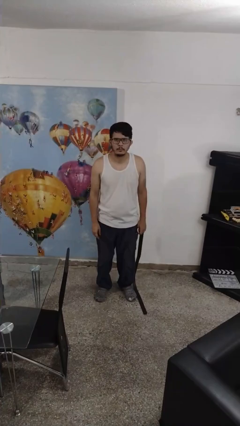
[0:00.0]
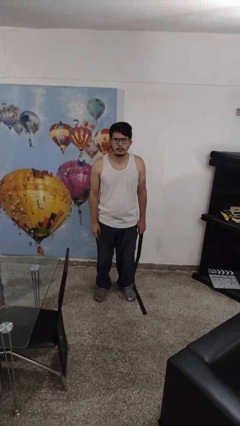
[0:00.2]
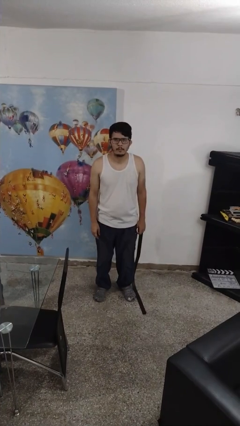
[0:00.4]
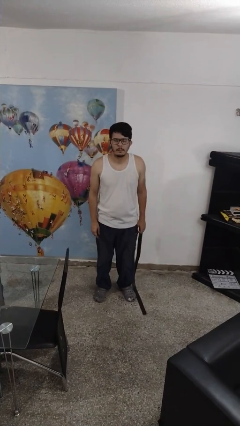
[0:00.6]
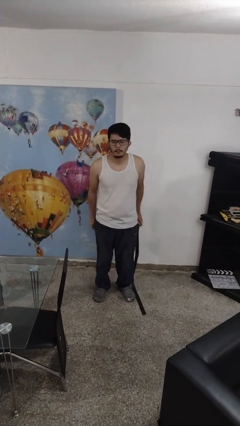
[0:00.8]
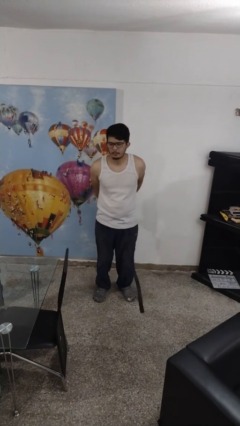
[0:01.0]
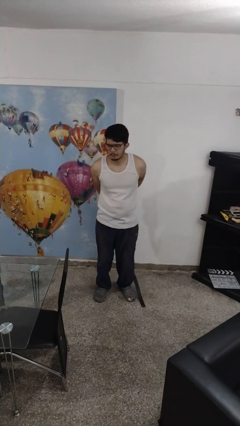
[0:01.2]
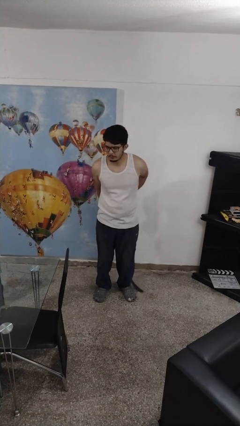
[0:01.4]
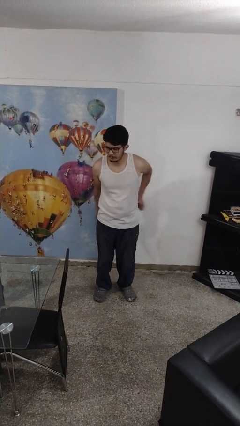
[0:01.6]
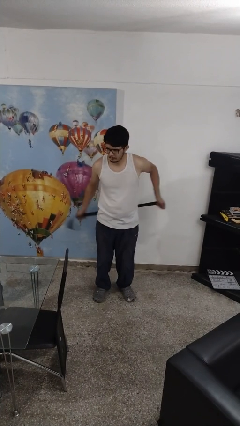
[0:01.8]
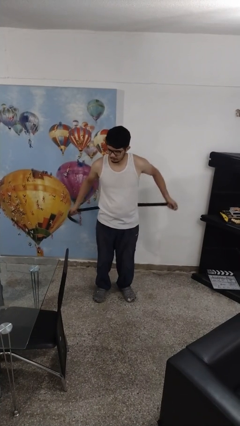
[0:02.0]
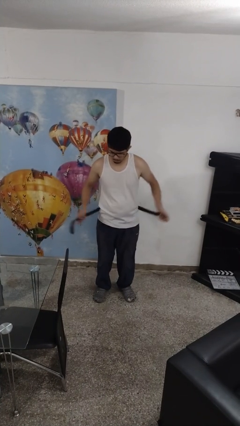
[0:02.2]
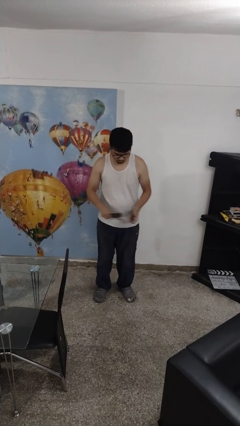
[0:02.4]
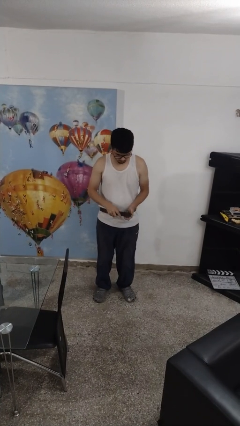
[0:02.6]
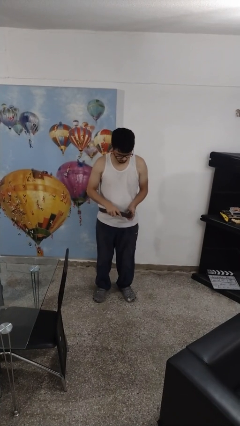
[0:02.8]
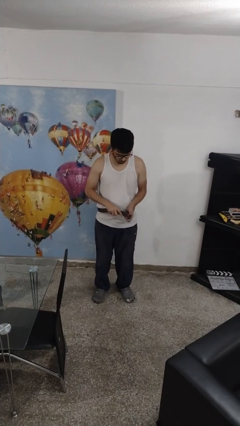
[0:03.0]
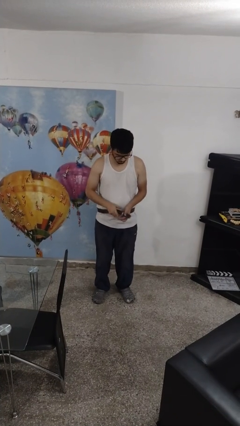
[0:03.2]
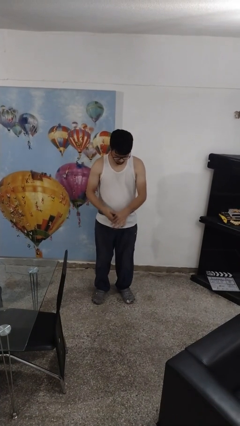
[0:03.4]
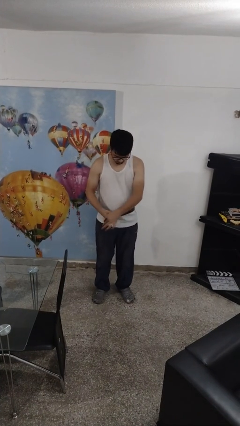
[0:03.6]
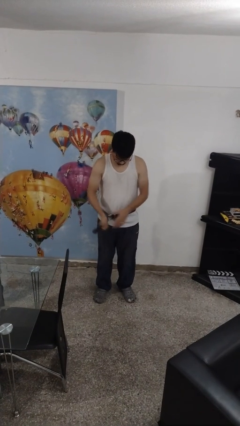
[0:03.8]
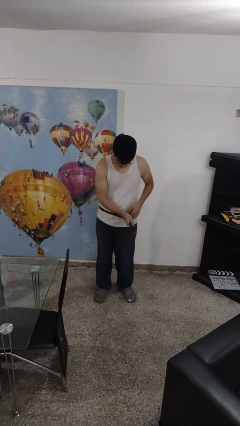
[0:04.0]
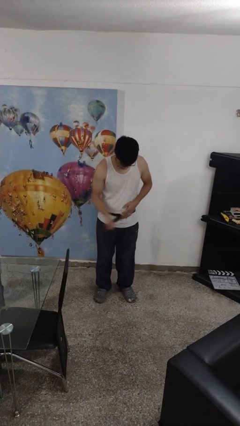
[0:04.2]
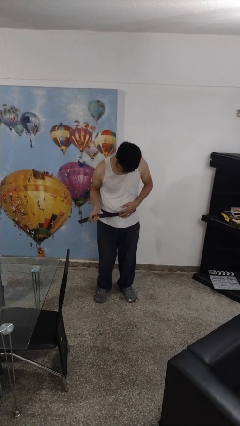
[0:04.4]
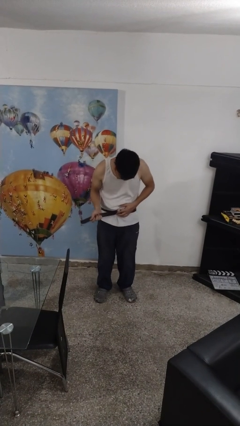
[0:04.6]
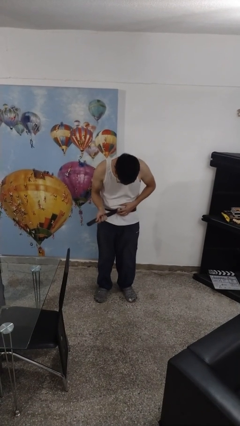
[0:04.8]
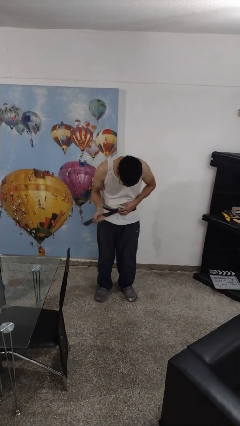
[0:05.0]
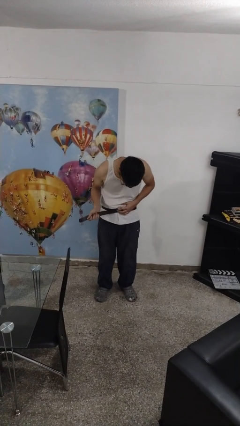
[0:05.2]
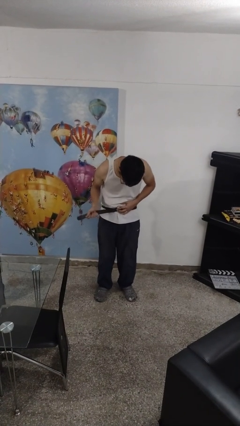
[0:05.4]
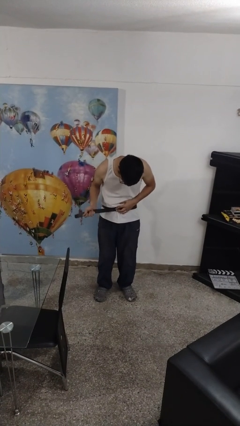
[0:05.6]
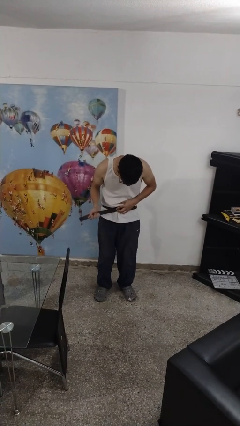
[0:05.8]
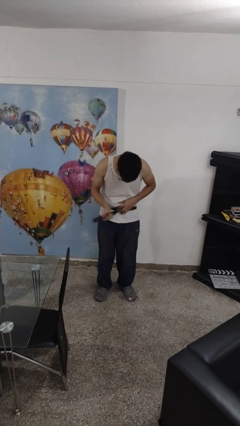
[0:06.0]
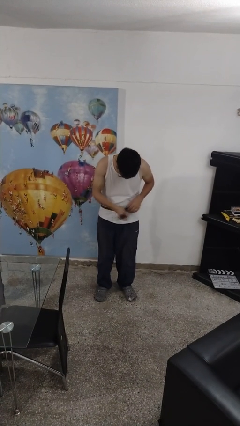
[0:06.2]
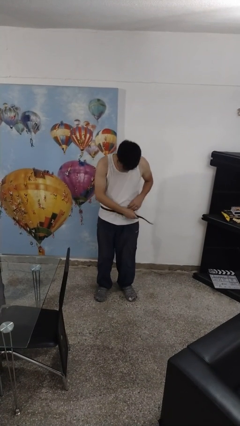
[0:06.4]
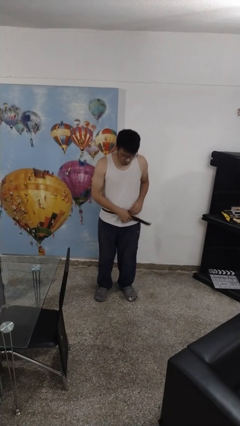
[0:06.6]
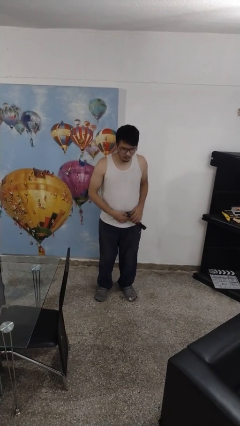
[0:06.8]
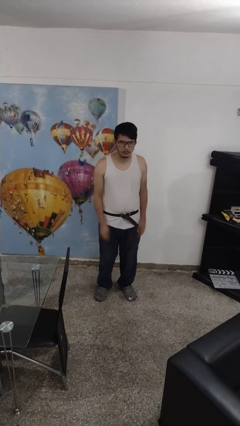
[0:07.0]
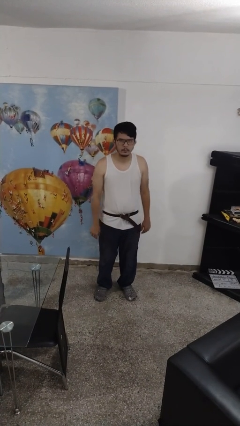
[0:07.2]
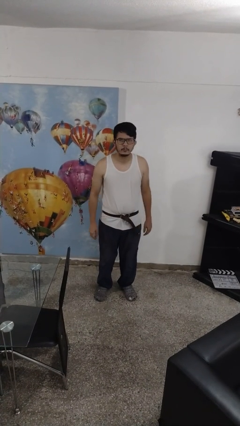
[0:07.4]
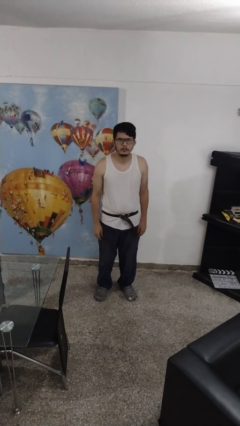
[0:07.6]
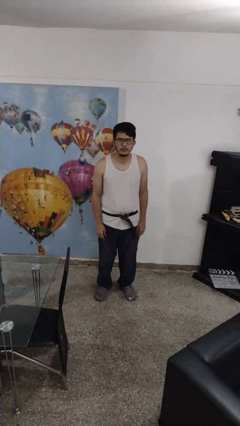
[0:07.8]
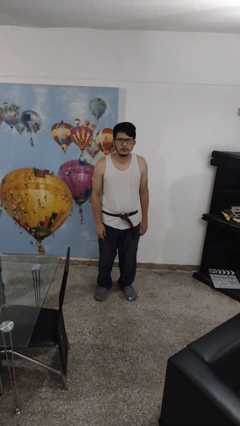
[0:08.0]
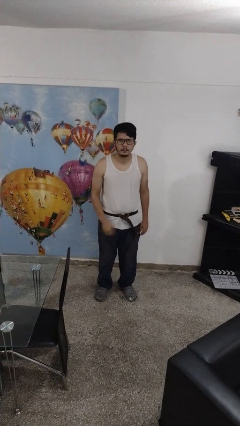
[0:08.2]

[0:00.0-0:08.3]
person puts on belt

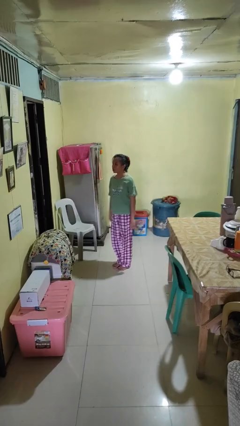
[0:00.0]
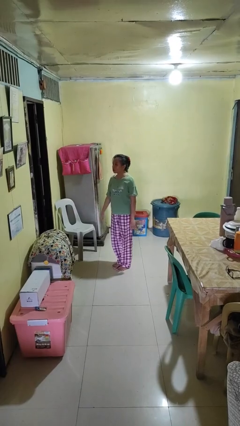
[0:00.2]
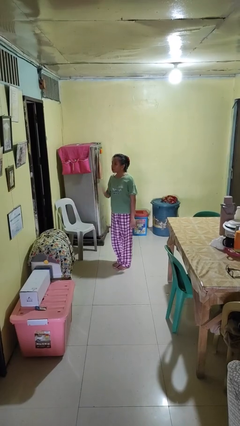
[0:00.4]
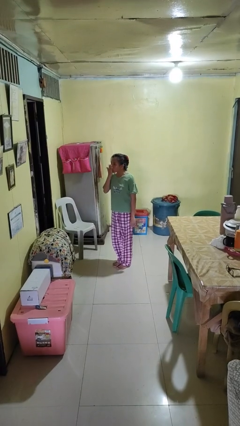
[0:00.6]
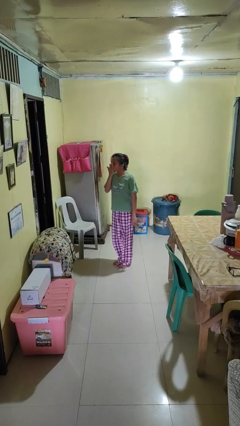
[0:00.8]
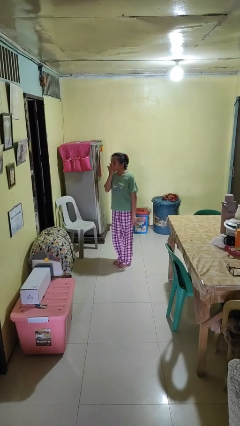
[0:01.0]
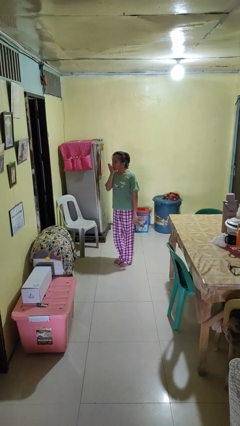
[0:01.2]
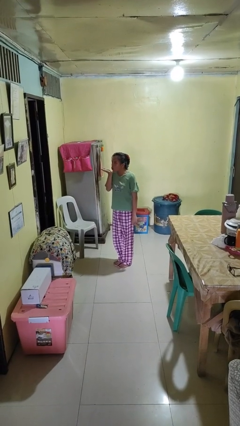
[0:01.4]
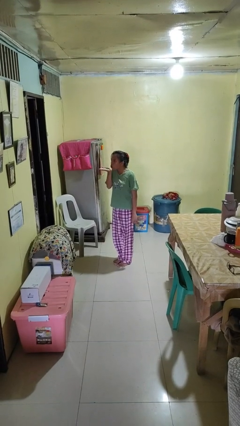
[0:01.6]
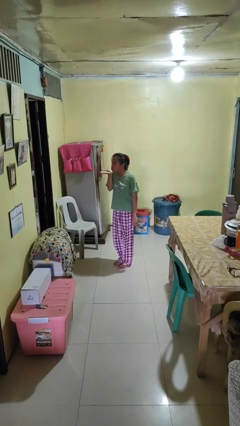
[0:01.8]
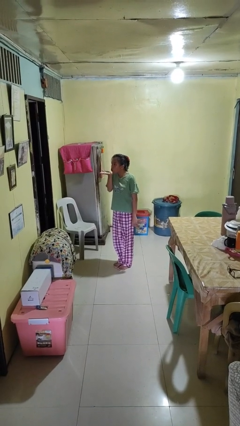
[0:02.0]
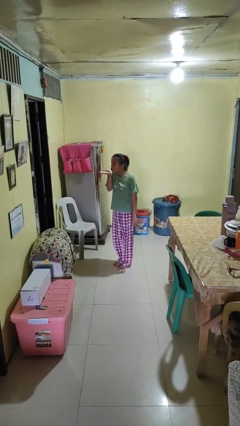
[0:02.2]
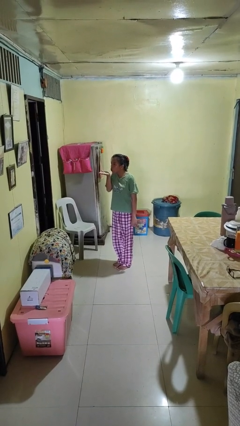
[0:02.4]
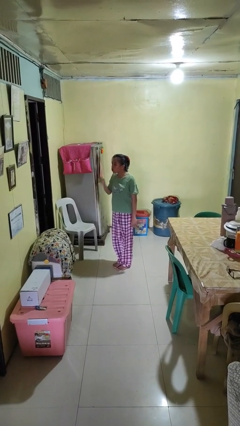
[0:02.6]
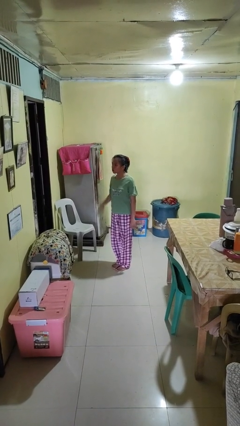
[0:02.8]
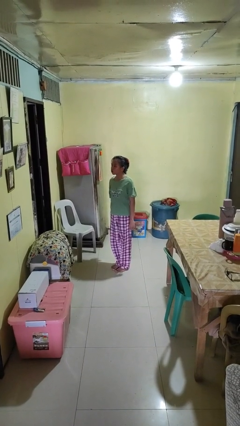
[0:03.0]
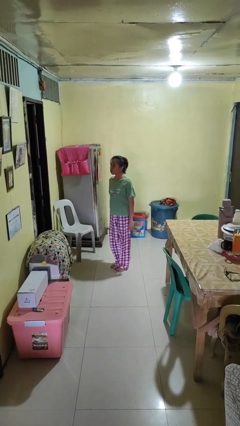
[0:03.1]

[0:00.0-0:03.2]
person gestures blow kiss

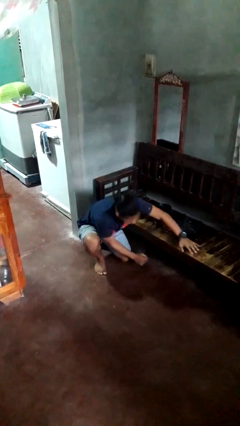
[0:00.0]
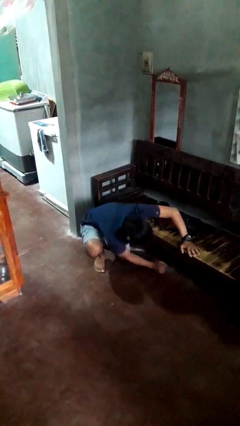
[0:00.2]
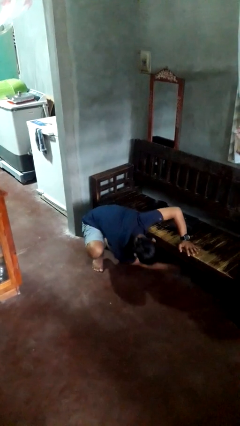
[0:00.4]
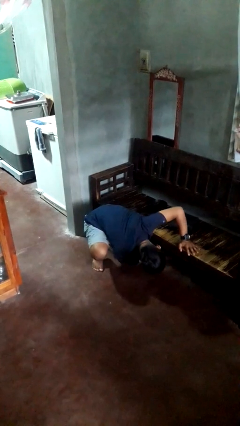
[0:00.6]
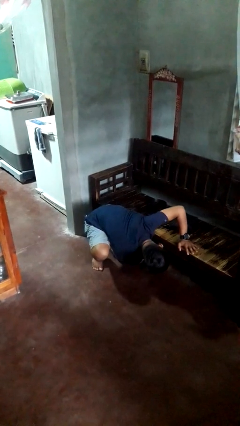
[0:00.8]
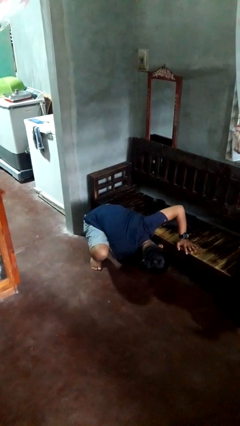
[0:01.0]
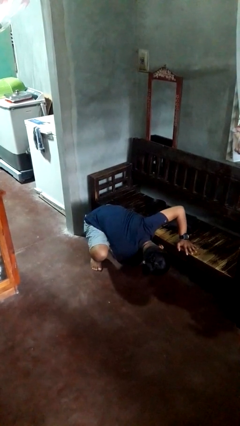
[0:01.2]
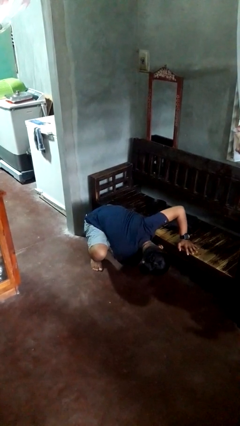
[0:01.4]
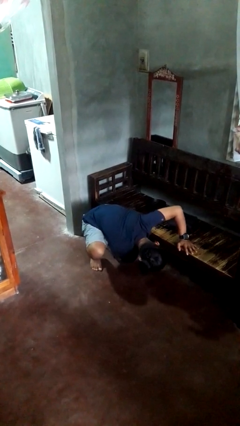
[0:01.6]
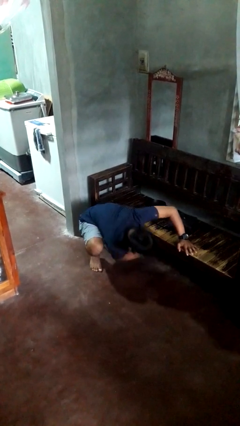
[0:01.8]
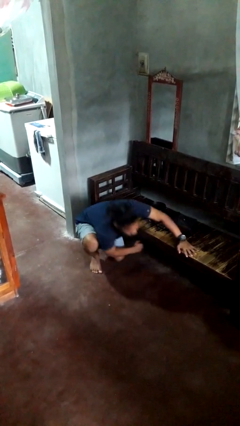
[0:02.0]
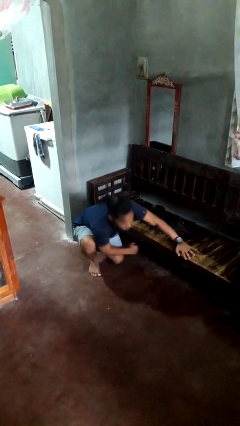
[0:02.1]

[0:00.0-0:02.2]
person searches under couch

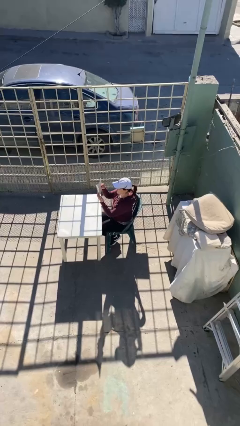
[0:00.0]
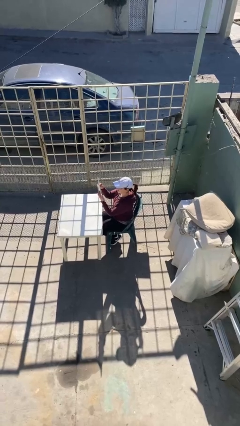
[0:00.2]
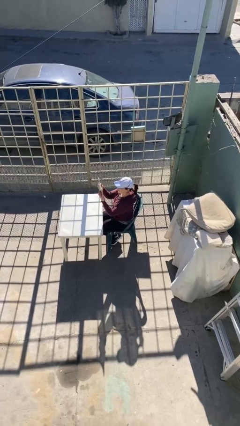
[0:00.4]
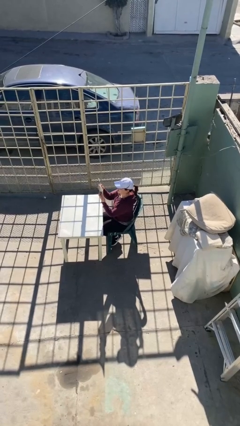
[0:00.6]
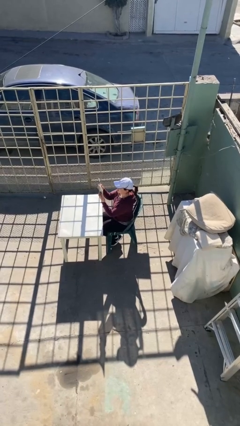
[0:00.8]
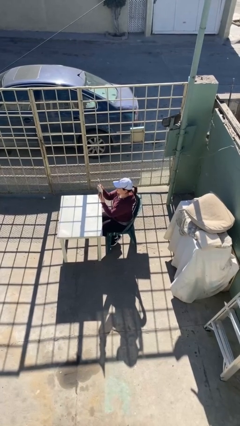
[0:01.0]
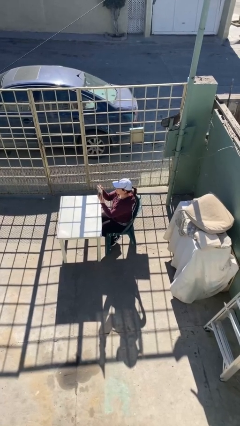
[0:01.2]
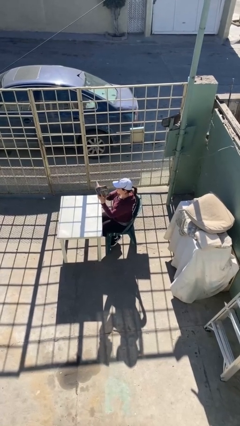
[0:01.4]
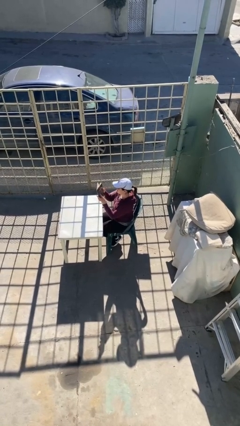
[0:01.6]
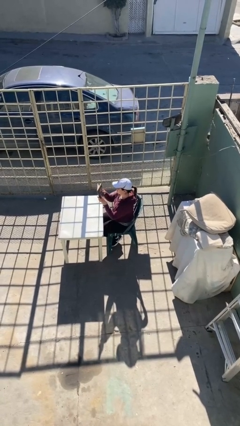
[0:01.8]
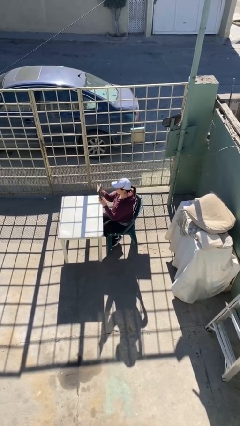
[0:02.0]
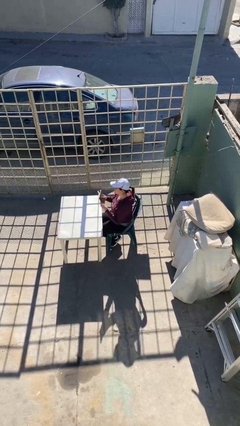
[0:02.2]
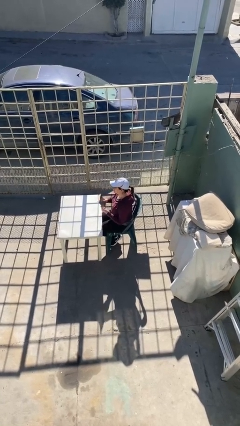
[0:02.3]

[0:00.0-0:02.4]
person reads document

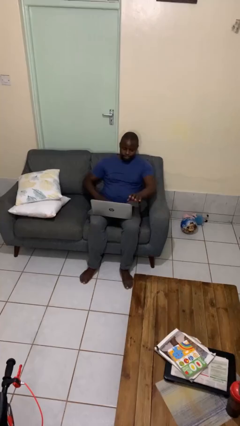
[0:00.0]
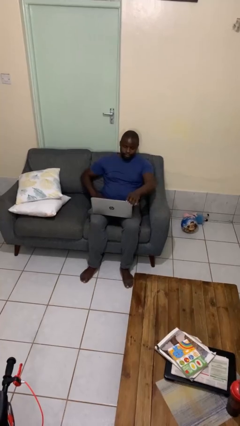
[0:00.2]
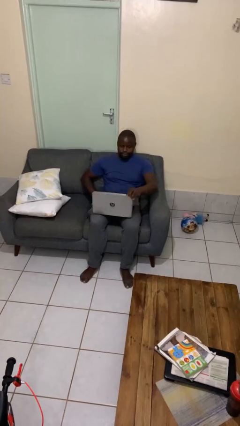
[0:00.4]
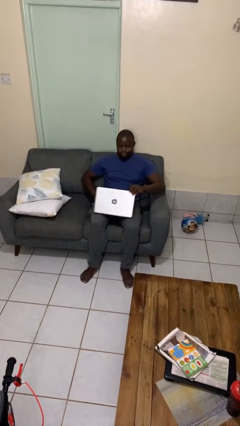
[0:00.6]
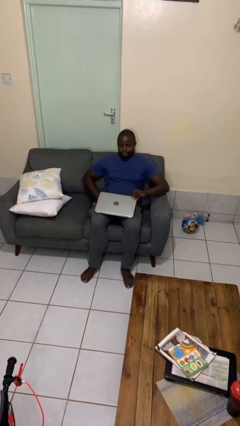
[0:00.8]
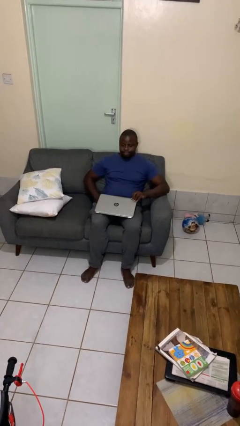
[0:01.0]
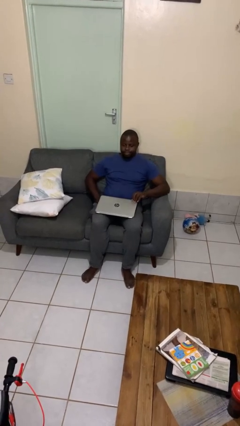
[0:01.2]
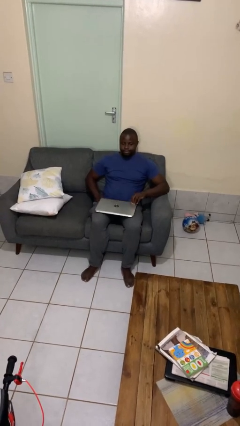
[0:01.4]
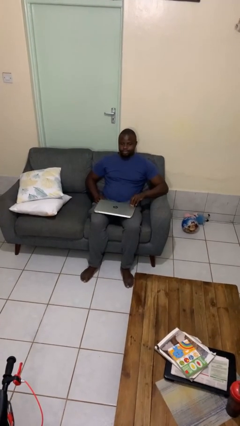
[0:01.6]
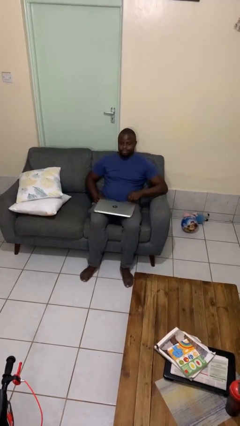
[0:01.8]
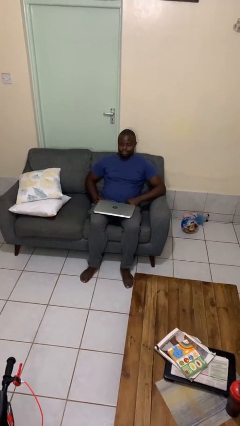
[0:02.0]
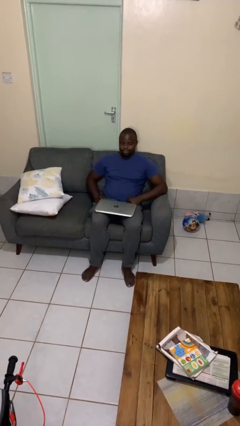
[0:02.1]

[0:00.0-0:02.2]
person closes laptop
